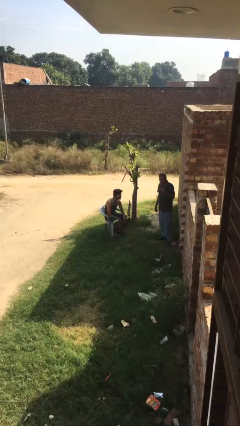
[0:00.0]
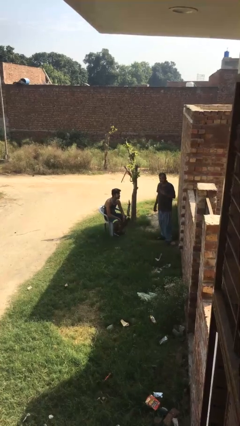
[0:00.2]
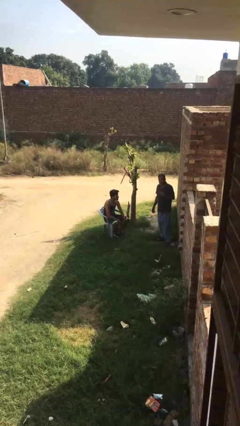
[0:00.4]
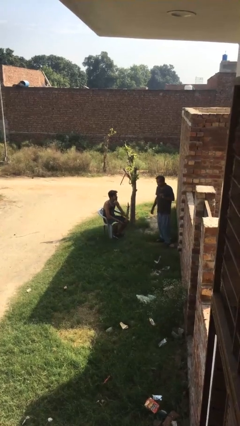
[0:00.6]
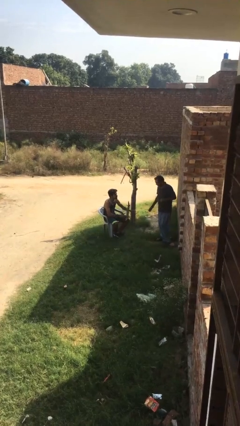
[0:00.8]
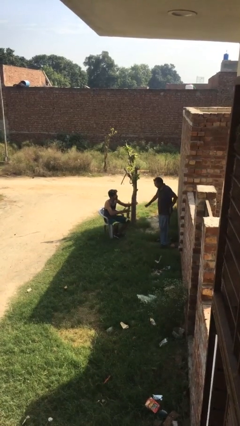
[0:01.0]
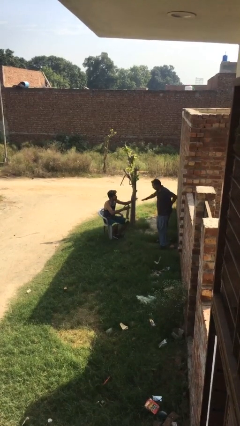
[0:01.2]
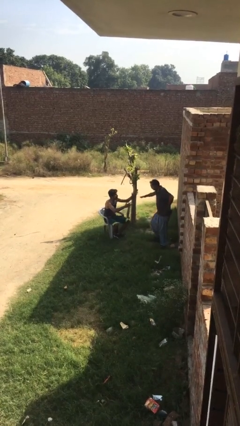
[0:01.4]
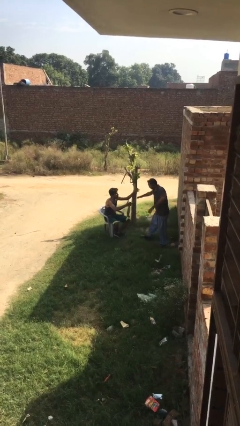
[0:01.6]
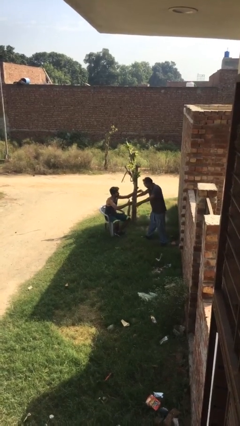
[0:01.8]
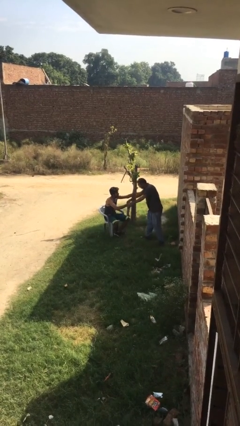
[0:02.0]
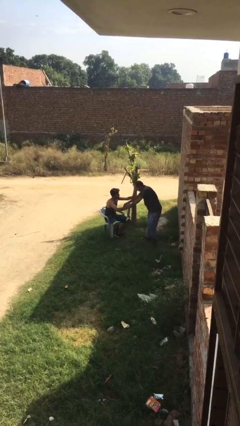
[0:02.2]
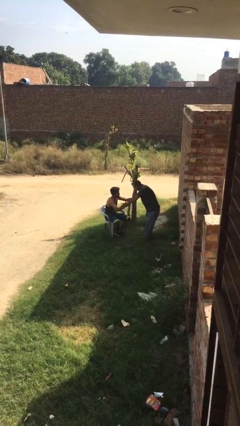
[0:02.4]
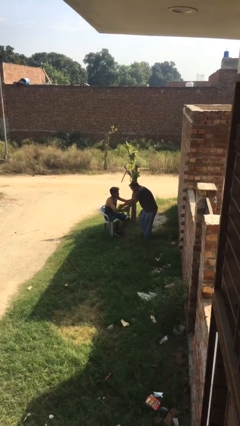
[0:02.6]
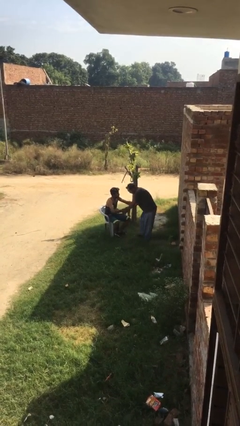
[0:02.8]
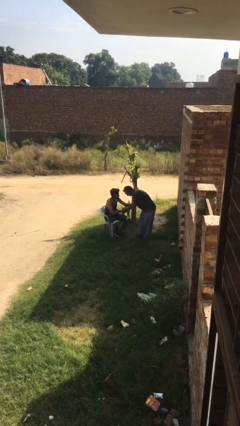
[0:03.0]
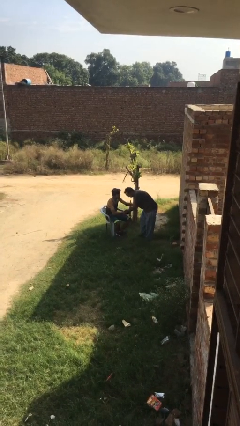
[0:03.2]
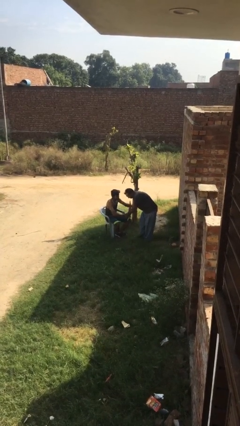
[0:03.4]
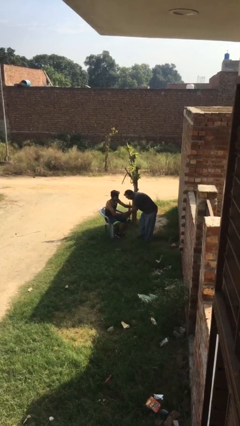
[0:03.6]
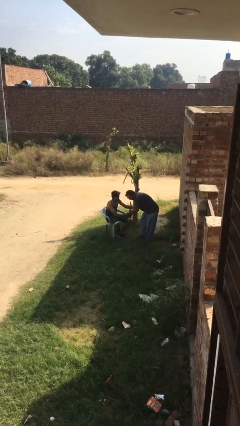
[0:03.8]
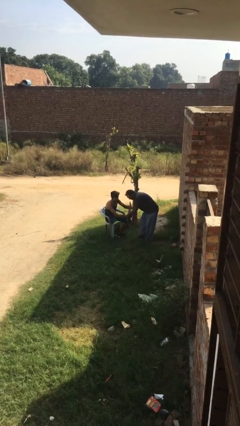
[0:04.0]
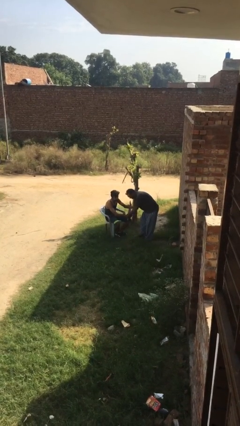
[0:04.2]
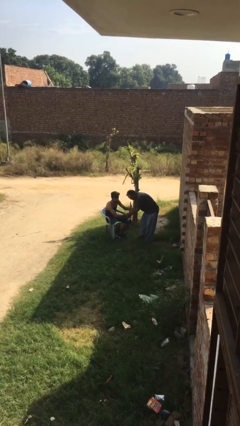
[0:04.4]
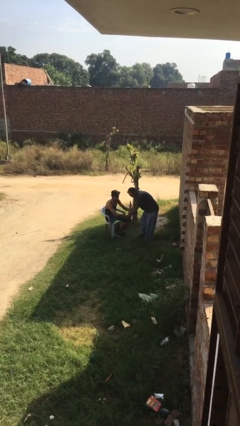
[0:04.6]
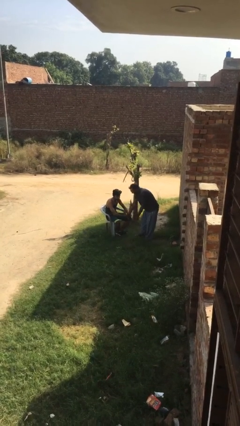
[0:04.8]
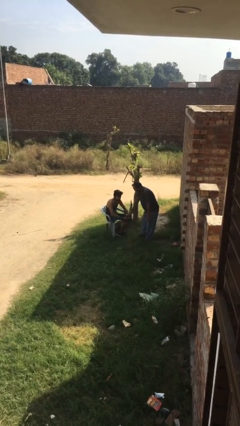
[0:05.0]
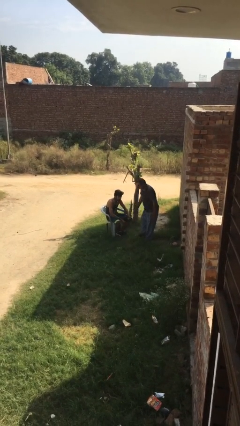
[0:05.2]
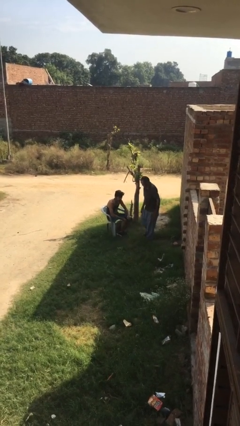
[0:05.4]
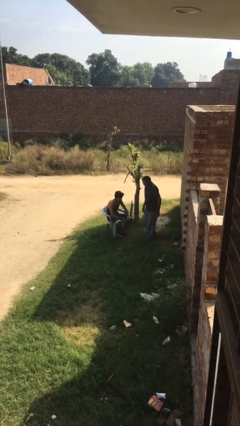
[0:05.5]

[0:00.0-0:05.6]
person shakes hand

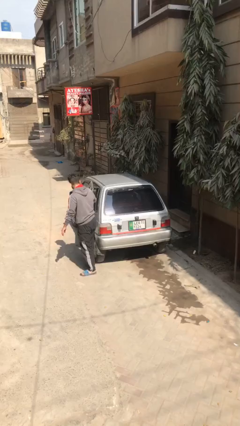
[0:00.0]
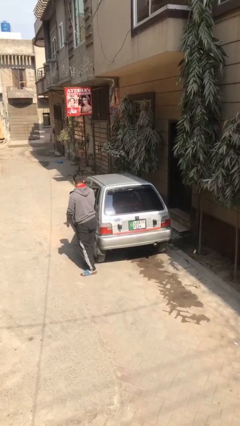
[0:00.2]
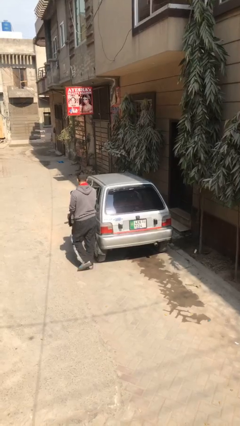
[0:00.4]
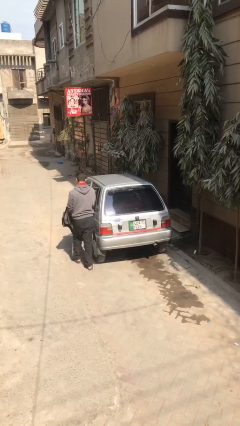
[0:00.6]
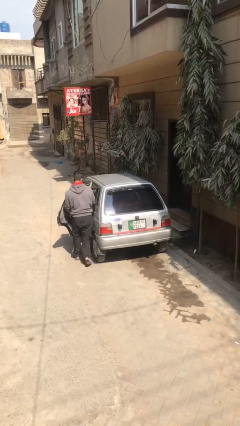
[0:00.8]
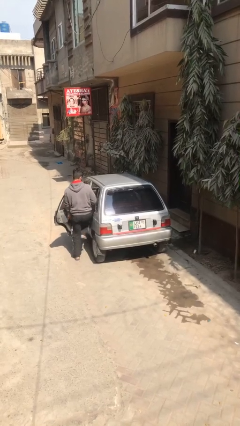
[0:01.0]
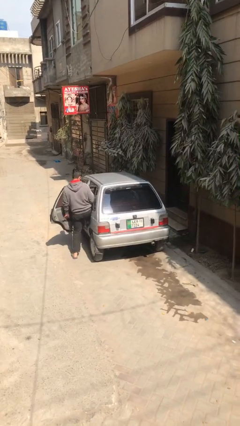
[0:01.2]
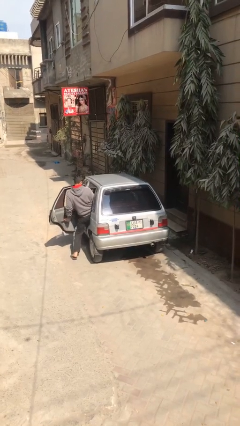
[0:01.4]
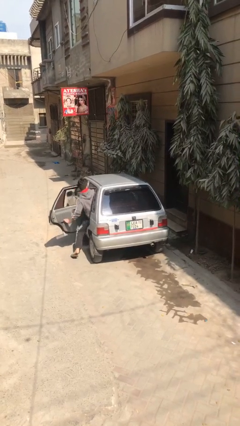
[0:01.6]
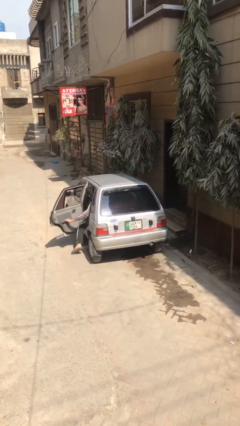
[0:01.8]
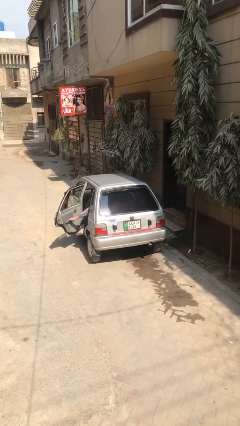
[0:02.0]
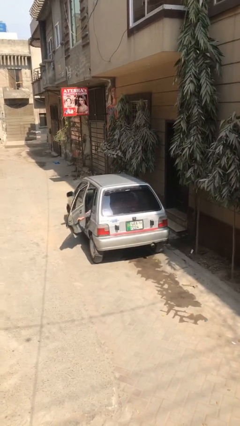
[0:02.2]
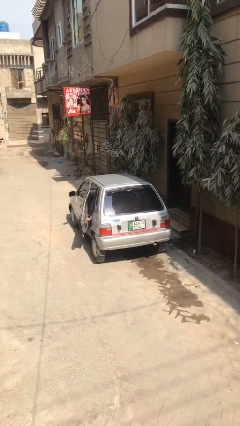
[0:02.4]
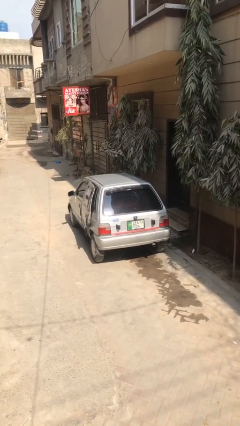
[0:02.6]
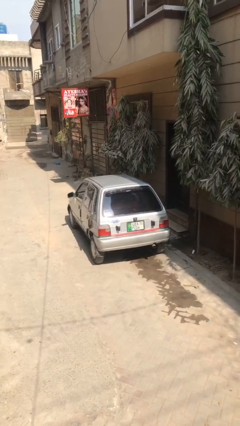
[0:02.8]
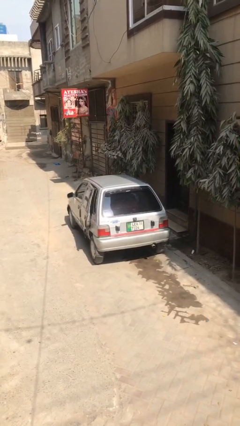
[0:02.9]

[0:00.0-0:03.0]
car picks up person

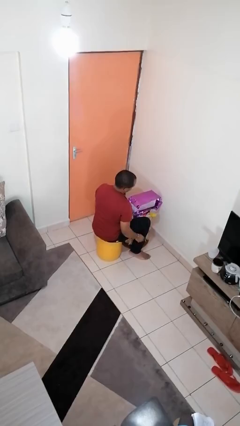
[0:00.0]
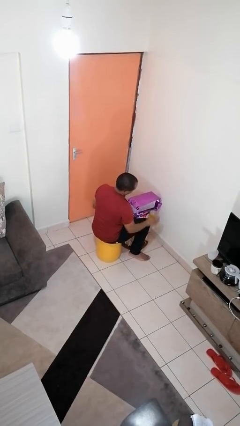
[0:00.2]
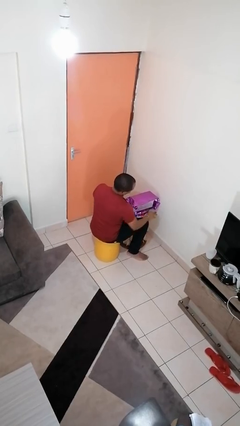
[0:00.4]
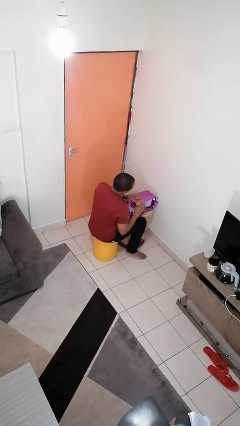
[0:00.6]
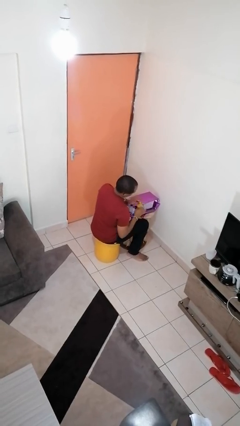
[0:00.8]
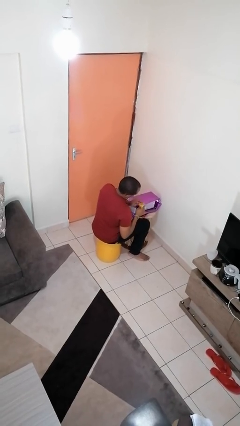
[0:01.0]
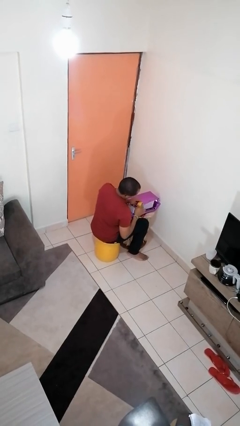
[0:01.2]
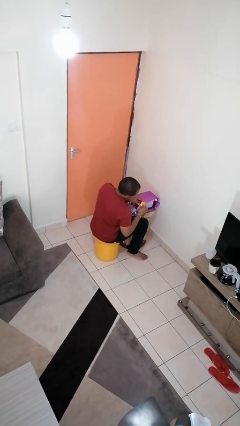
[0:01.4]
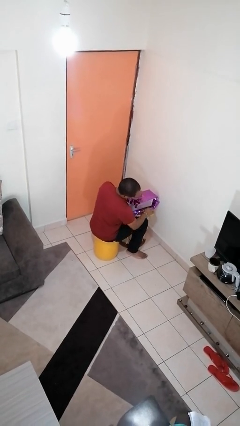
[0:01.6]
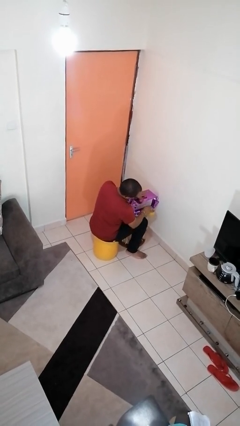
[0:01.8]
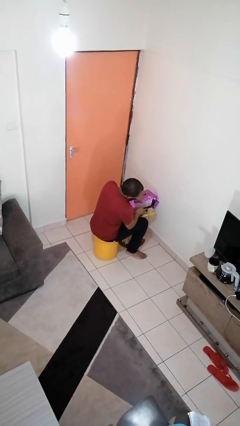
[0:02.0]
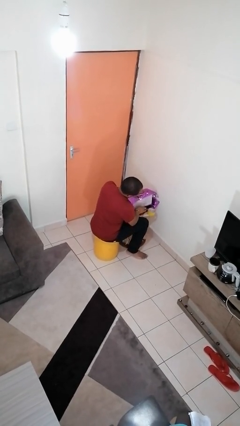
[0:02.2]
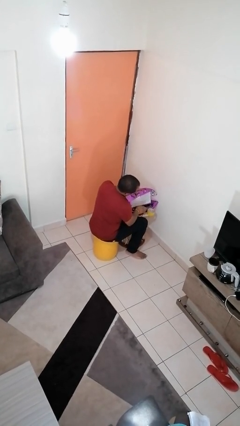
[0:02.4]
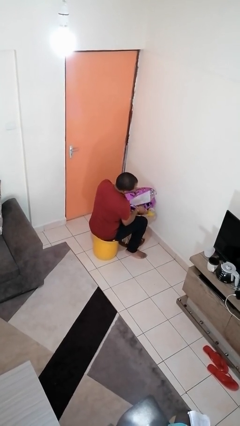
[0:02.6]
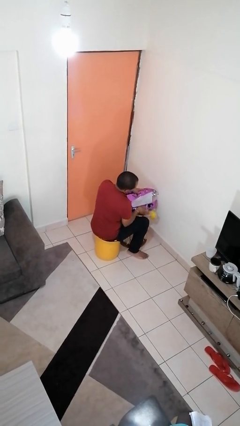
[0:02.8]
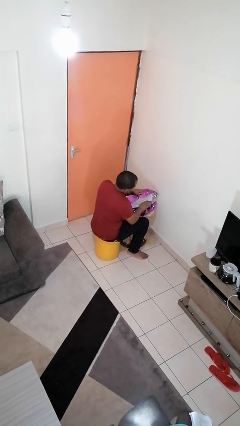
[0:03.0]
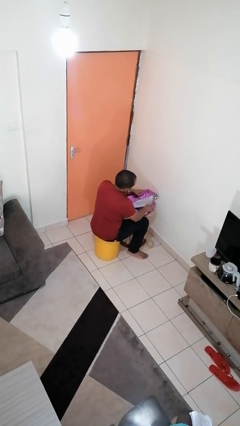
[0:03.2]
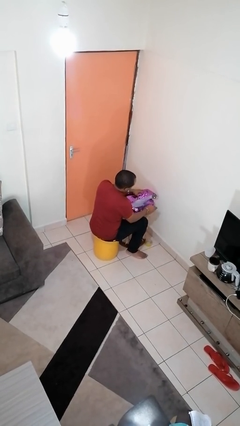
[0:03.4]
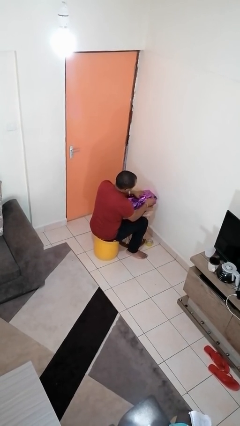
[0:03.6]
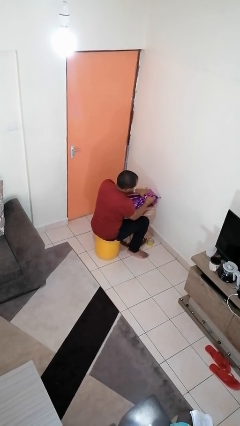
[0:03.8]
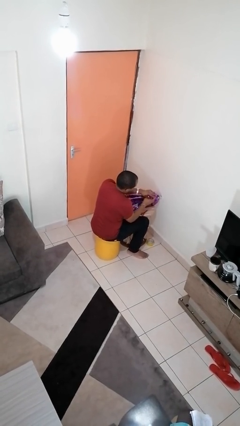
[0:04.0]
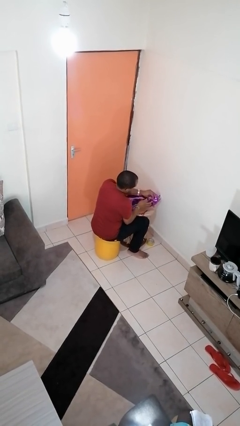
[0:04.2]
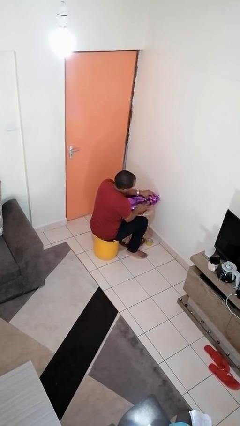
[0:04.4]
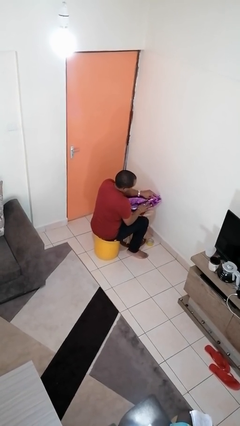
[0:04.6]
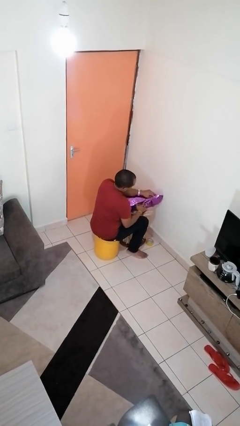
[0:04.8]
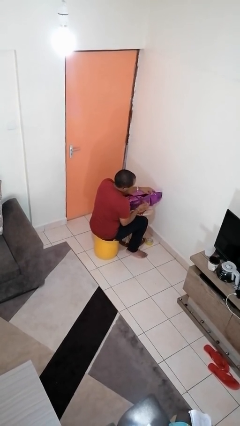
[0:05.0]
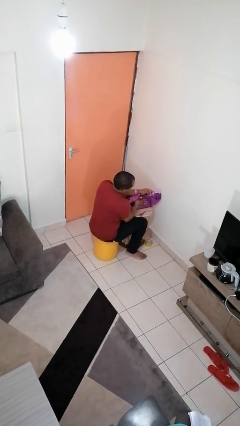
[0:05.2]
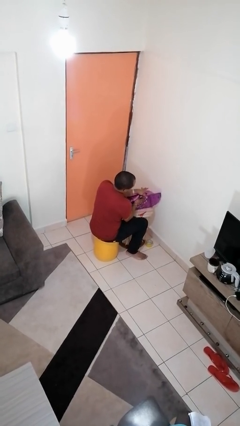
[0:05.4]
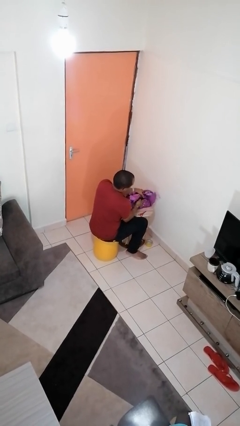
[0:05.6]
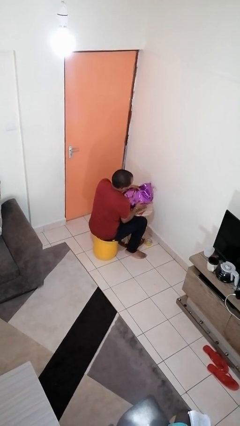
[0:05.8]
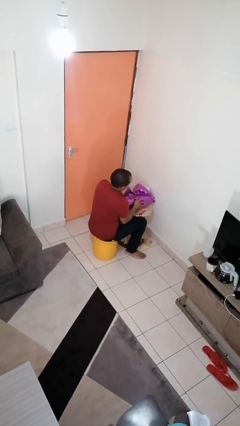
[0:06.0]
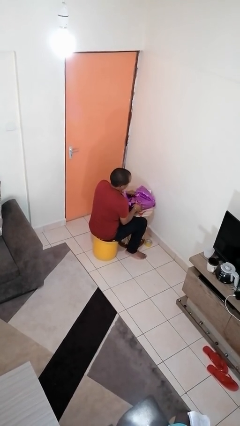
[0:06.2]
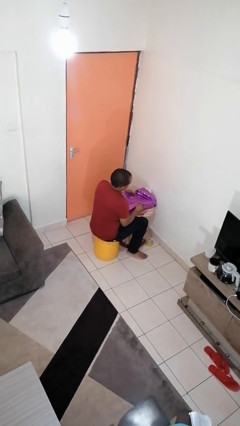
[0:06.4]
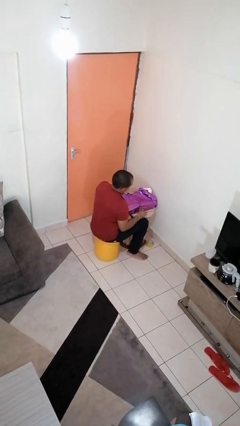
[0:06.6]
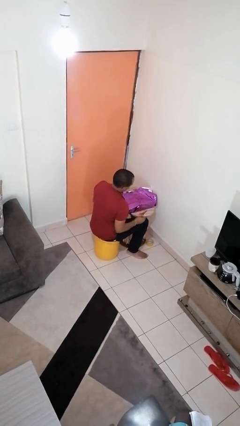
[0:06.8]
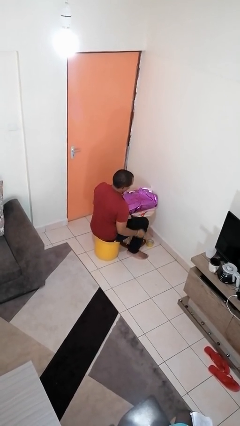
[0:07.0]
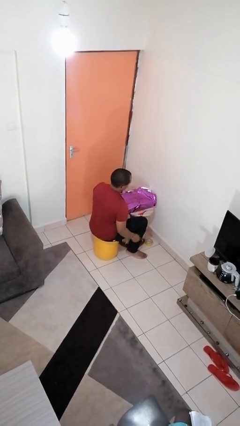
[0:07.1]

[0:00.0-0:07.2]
person wraps box

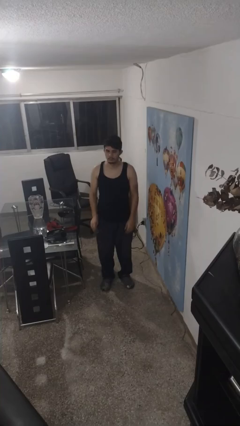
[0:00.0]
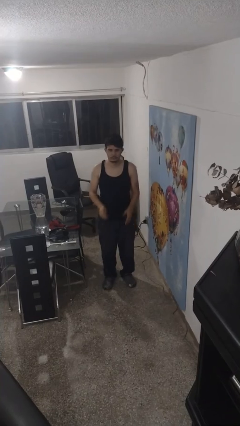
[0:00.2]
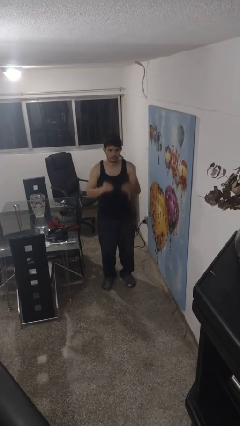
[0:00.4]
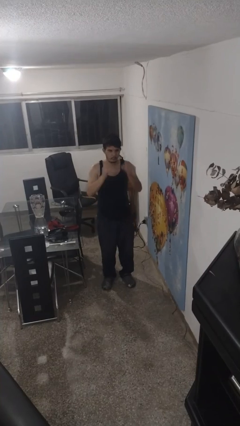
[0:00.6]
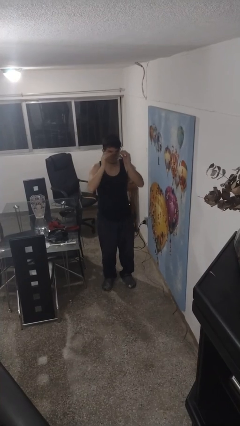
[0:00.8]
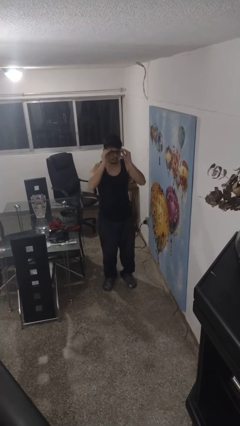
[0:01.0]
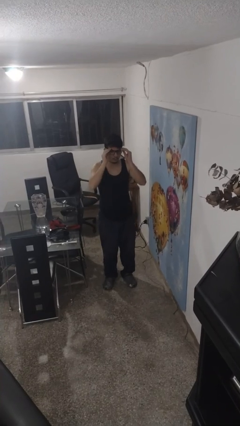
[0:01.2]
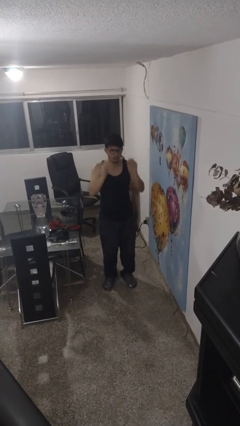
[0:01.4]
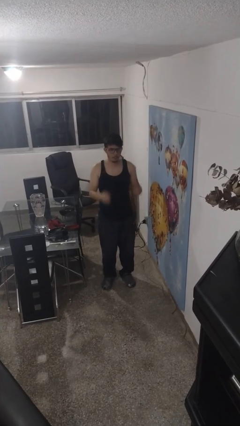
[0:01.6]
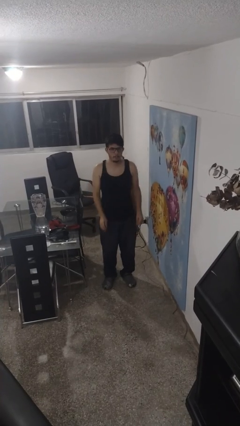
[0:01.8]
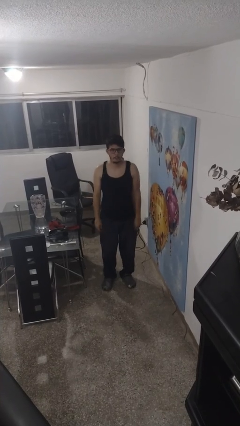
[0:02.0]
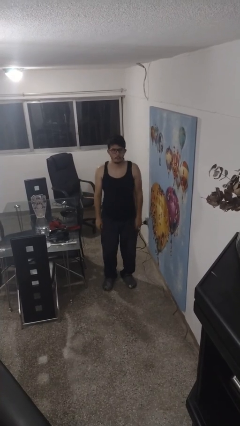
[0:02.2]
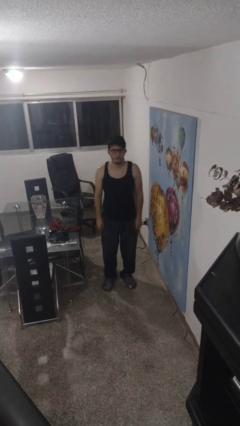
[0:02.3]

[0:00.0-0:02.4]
person puts on glasses
